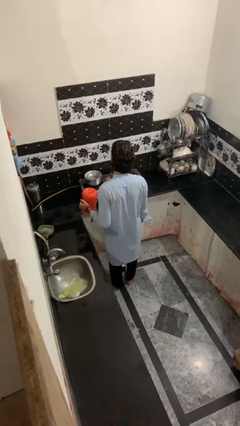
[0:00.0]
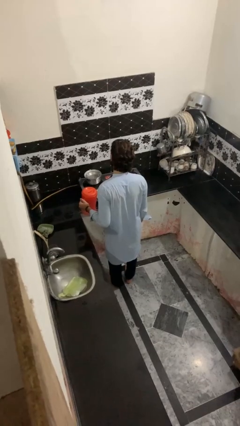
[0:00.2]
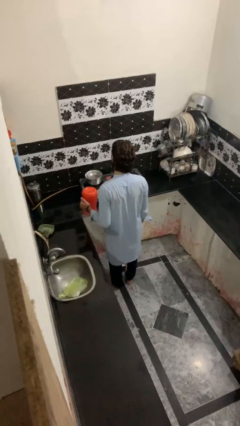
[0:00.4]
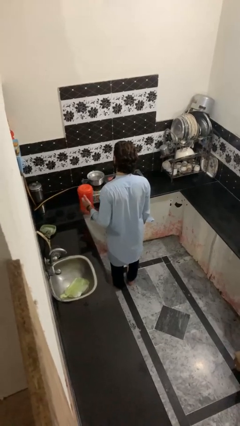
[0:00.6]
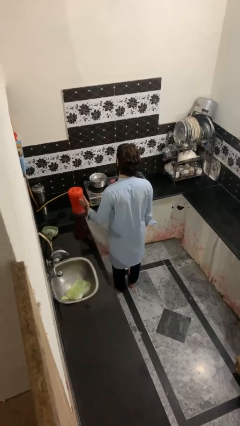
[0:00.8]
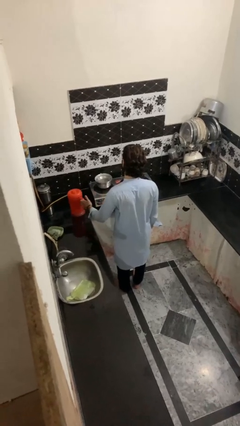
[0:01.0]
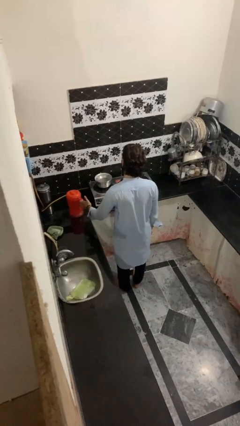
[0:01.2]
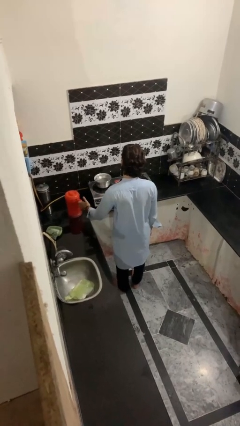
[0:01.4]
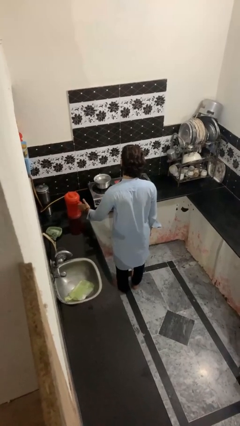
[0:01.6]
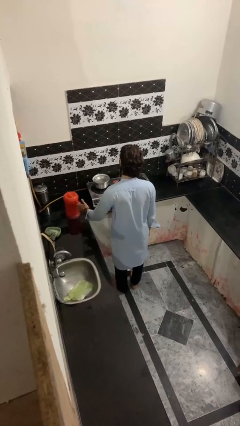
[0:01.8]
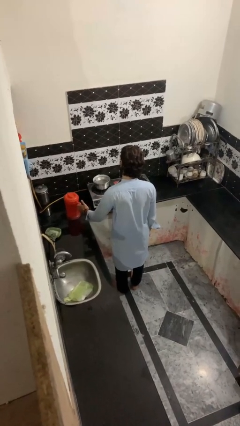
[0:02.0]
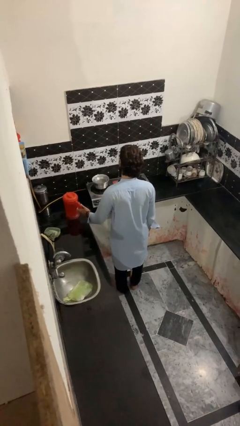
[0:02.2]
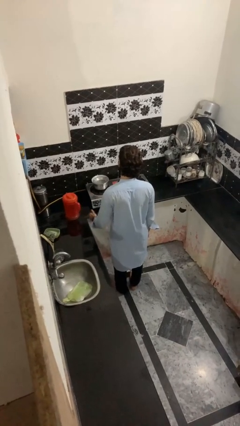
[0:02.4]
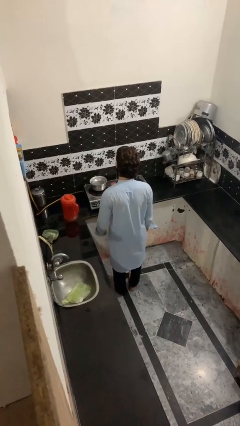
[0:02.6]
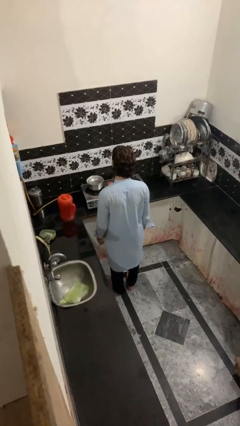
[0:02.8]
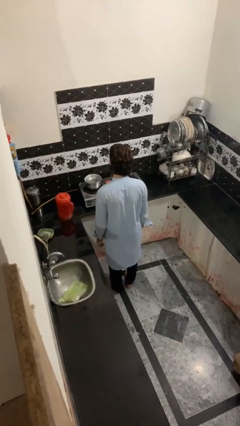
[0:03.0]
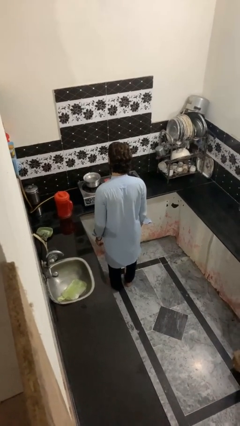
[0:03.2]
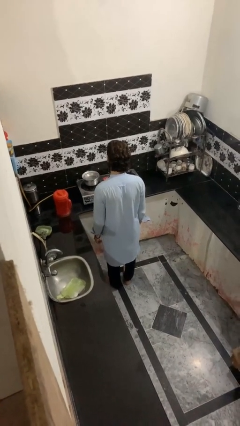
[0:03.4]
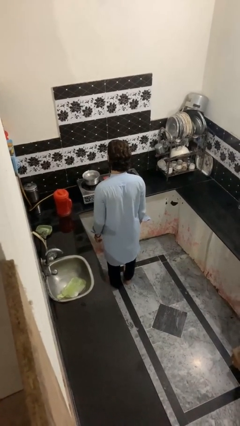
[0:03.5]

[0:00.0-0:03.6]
person puts down object on countertop

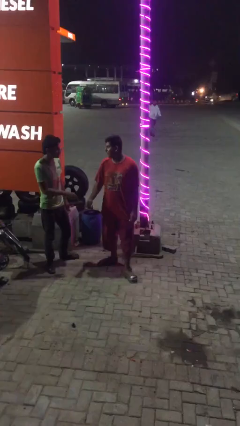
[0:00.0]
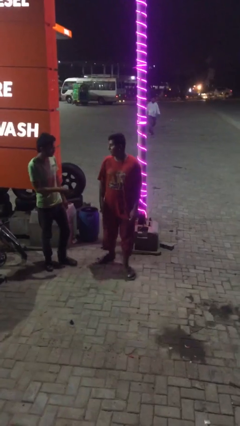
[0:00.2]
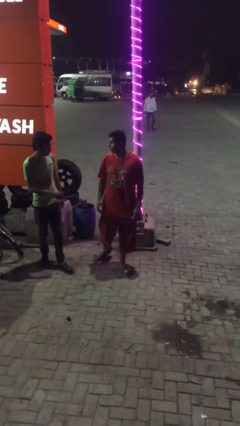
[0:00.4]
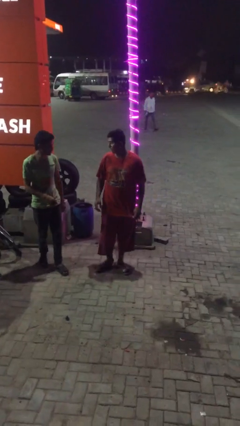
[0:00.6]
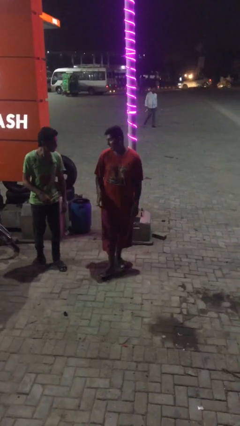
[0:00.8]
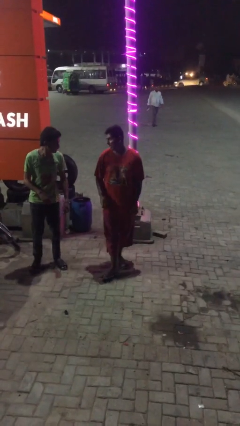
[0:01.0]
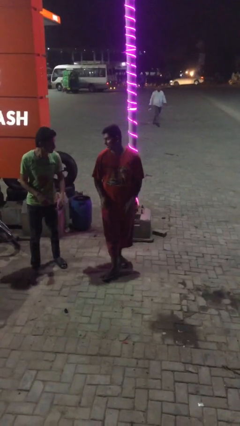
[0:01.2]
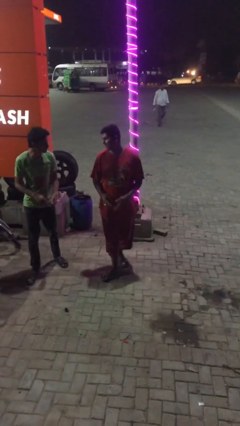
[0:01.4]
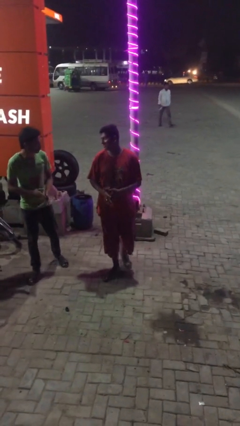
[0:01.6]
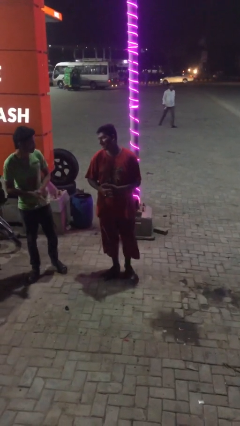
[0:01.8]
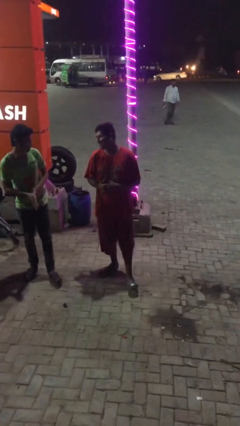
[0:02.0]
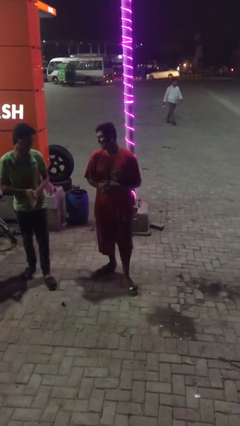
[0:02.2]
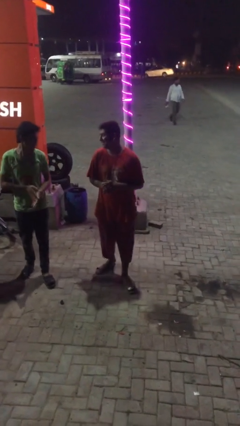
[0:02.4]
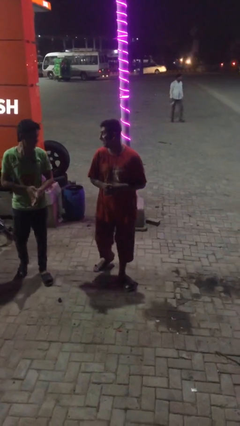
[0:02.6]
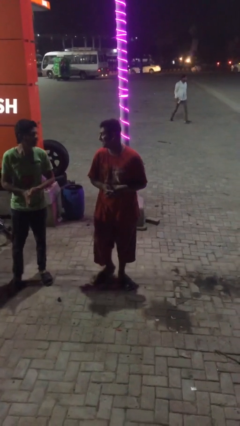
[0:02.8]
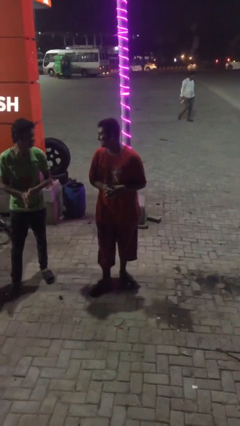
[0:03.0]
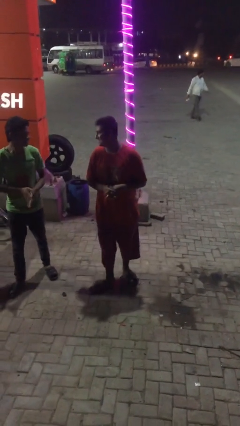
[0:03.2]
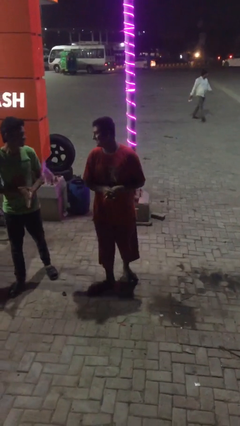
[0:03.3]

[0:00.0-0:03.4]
person talks to person

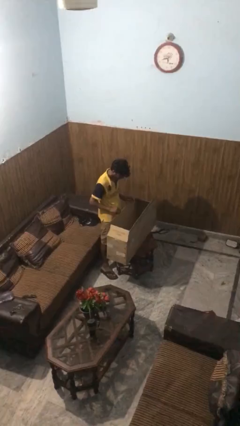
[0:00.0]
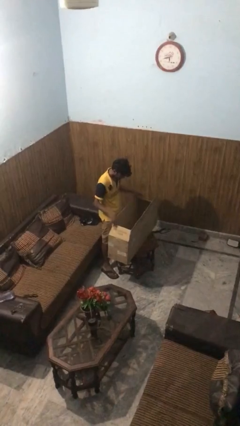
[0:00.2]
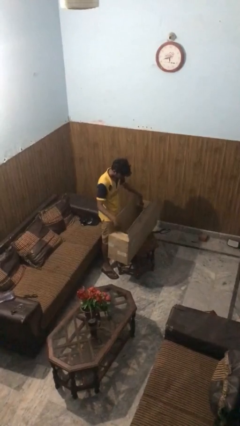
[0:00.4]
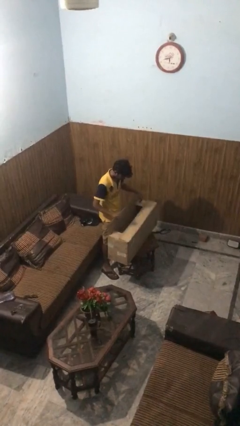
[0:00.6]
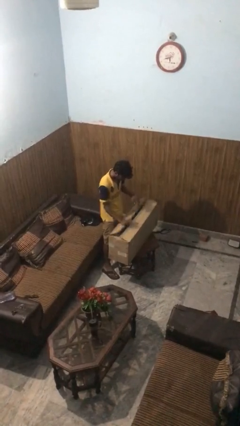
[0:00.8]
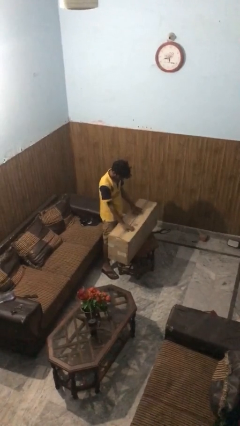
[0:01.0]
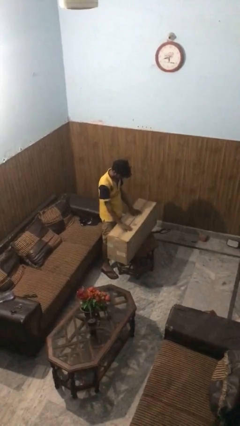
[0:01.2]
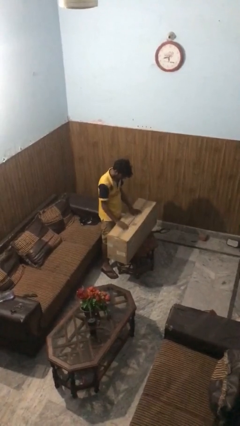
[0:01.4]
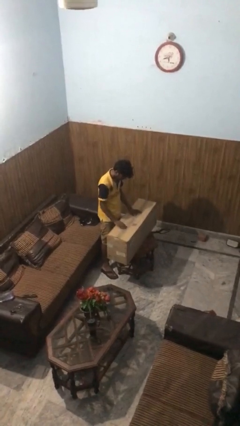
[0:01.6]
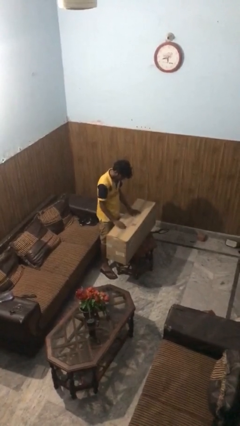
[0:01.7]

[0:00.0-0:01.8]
person closes box

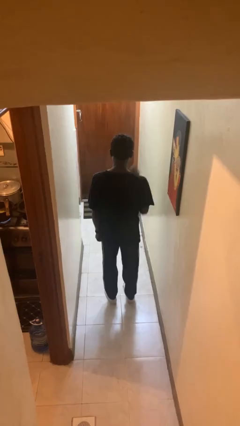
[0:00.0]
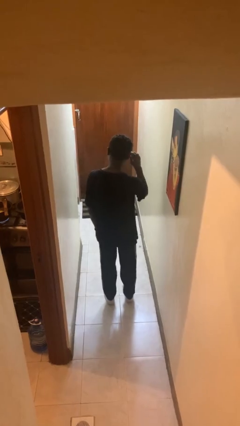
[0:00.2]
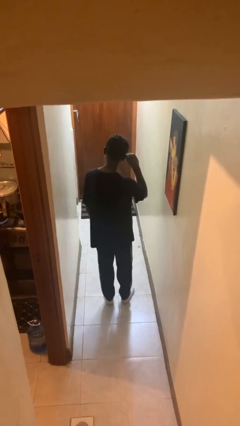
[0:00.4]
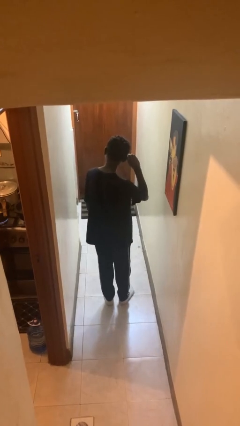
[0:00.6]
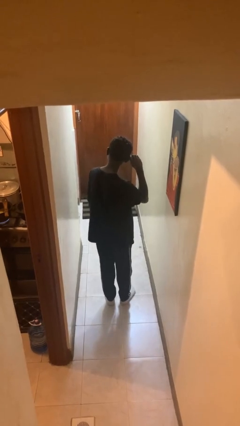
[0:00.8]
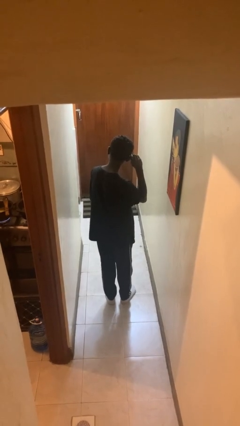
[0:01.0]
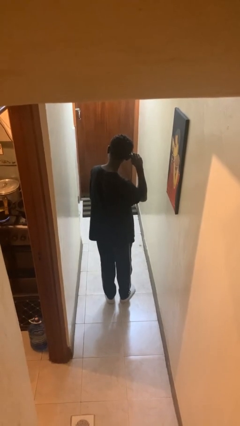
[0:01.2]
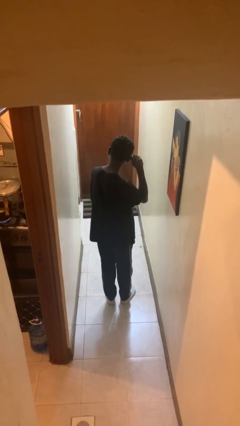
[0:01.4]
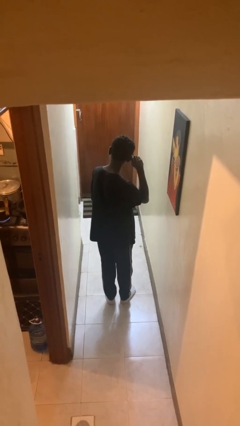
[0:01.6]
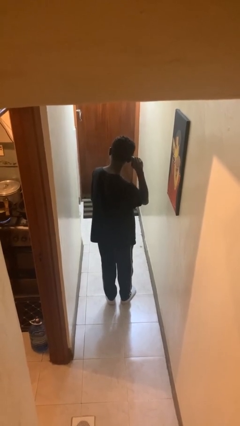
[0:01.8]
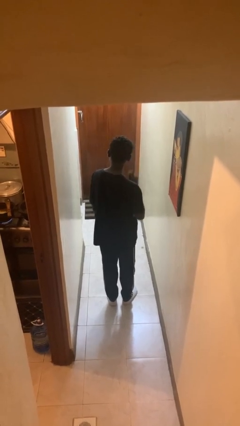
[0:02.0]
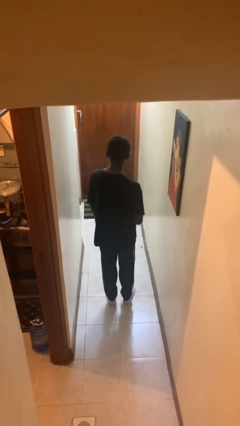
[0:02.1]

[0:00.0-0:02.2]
person touches earlobe

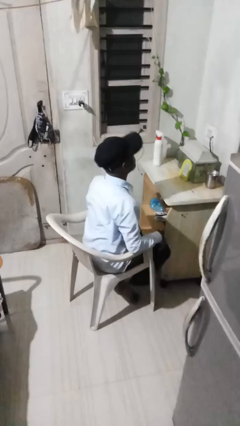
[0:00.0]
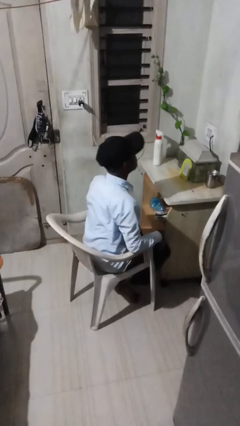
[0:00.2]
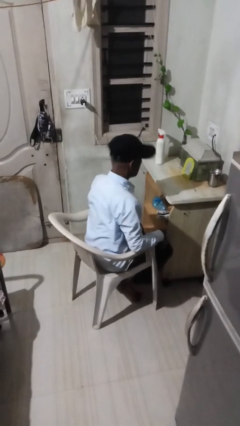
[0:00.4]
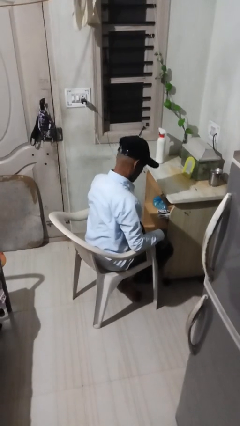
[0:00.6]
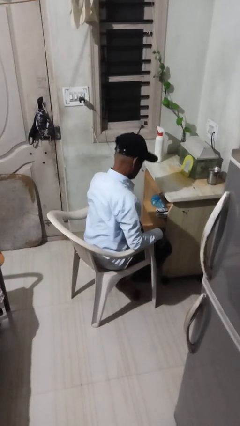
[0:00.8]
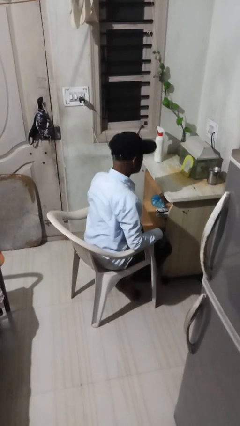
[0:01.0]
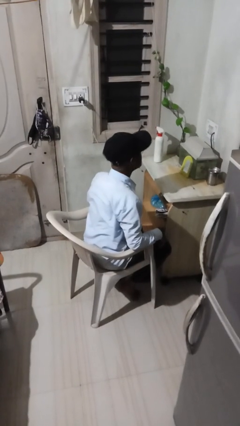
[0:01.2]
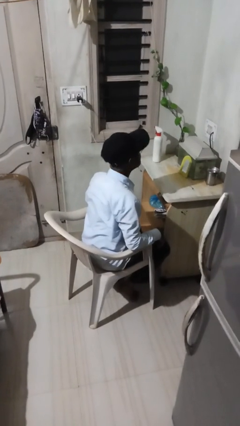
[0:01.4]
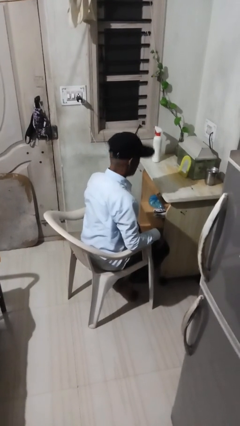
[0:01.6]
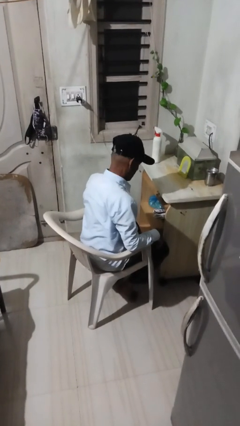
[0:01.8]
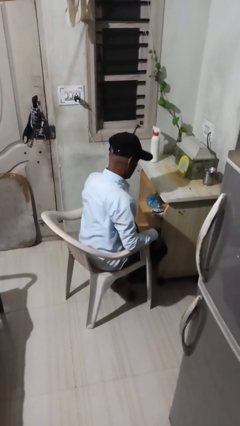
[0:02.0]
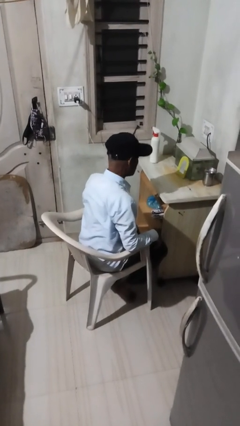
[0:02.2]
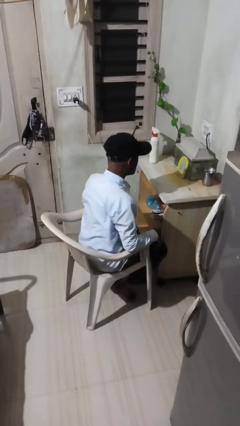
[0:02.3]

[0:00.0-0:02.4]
person nods head

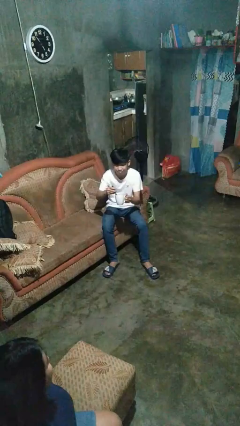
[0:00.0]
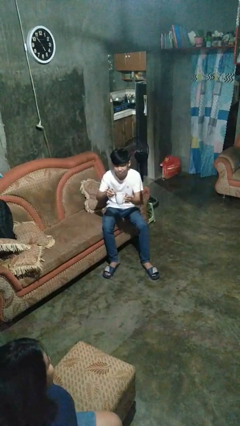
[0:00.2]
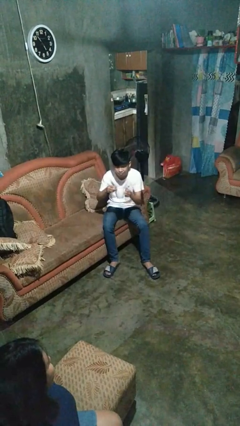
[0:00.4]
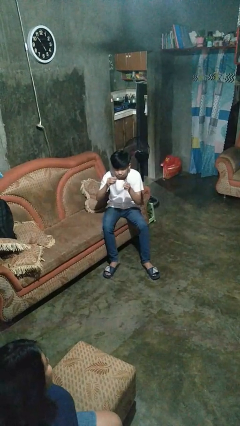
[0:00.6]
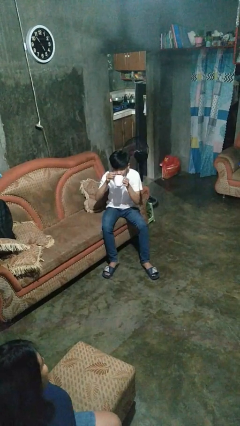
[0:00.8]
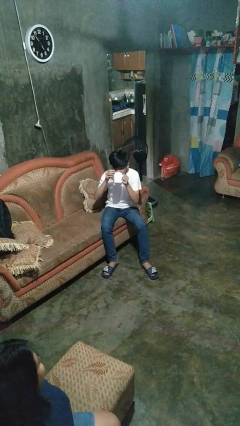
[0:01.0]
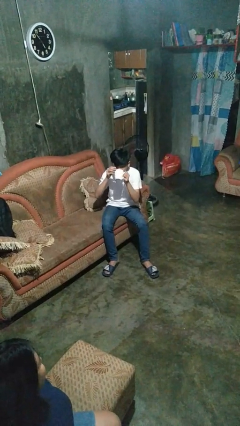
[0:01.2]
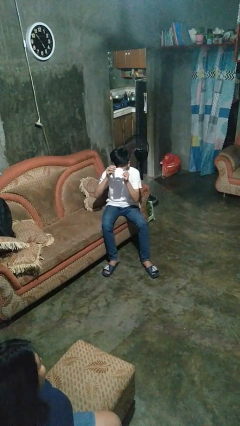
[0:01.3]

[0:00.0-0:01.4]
person drinks from mug

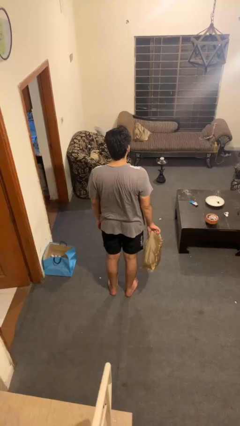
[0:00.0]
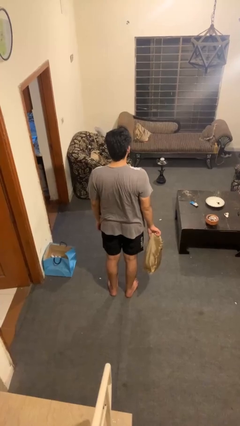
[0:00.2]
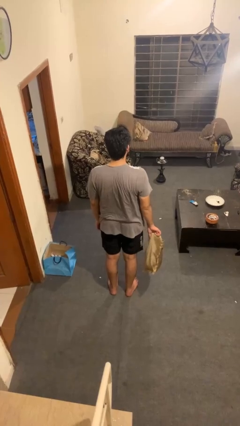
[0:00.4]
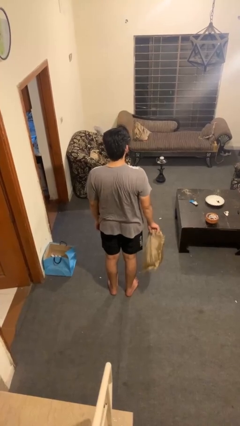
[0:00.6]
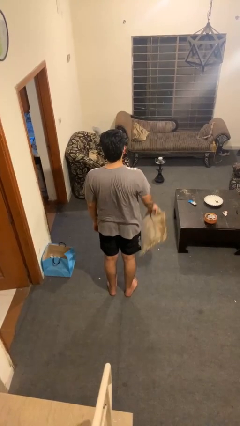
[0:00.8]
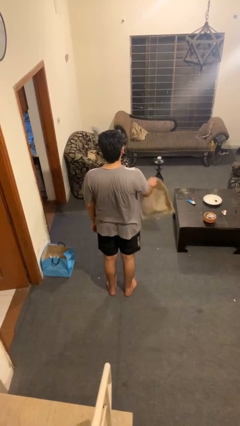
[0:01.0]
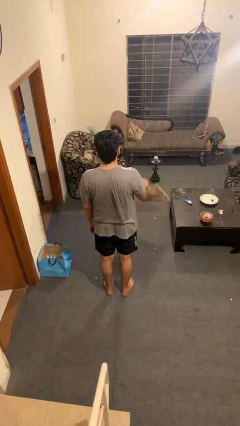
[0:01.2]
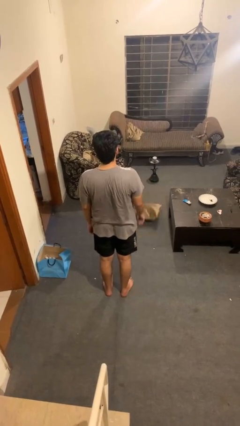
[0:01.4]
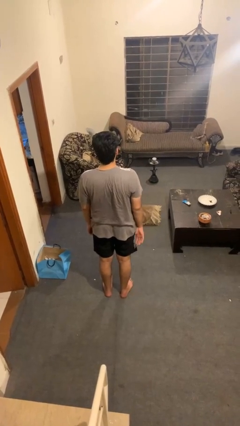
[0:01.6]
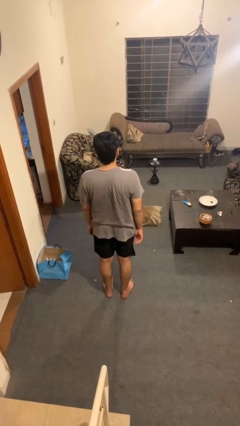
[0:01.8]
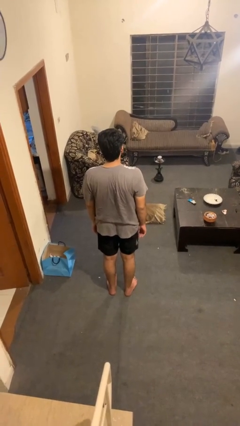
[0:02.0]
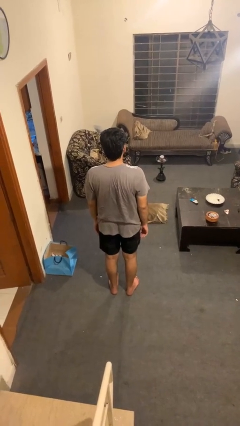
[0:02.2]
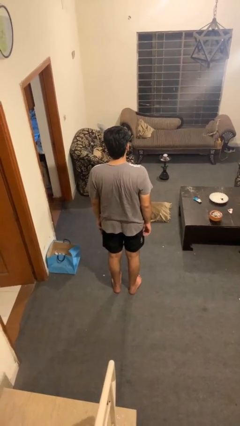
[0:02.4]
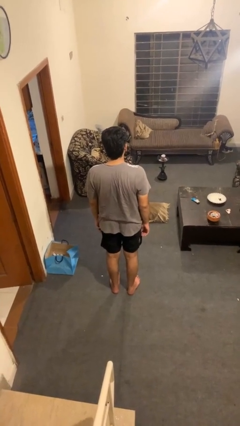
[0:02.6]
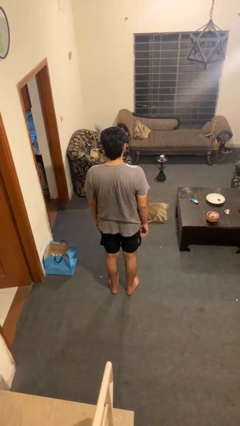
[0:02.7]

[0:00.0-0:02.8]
person throws object into air
